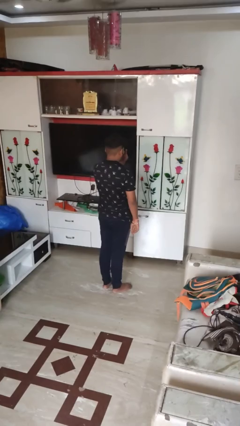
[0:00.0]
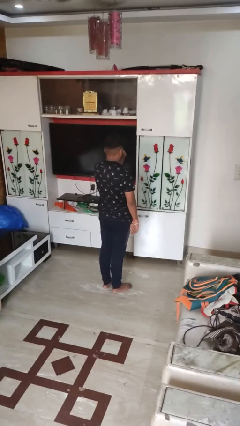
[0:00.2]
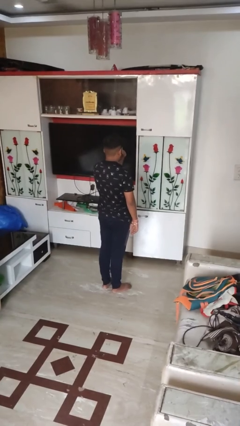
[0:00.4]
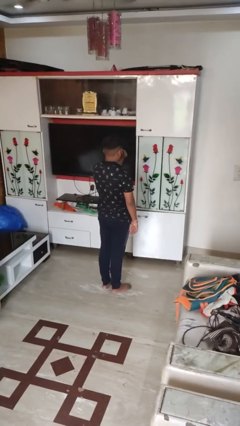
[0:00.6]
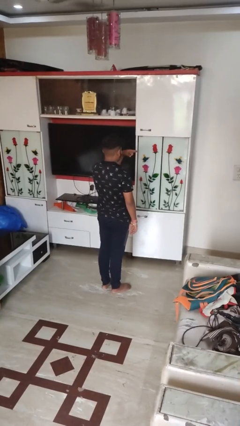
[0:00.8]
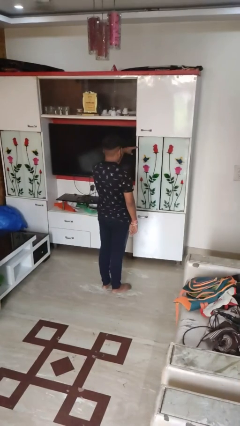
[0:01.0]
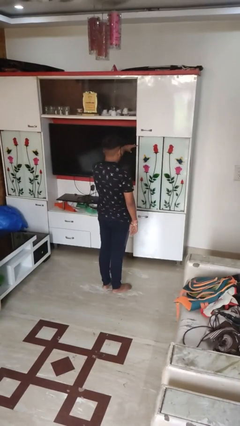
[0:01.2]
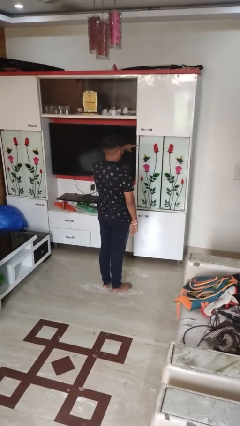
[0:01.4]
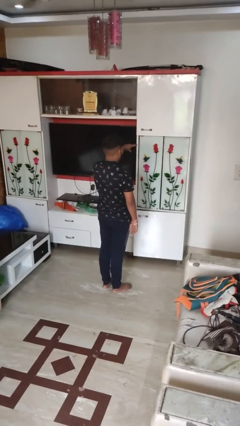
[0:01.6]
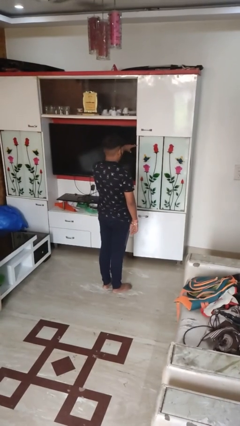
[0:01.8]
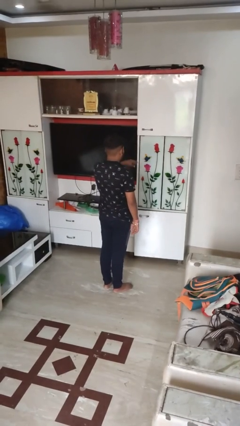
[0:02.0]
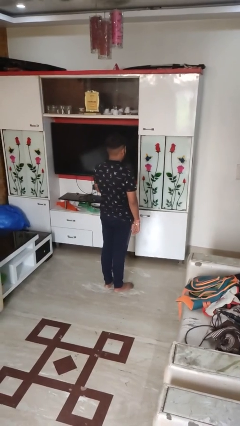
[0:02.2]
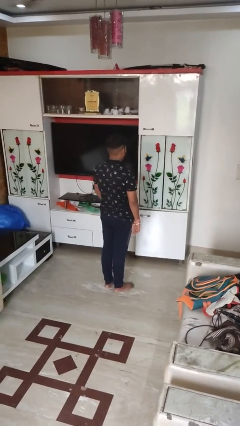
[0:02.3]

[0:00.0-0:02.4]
person gestures watch closely

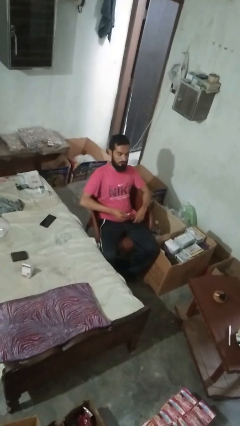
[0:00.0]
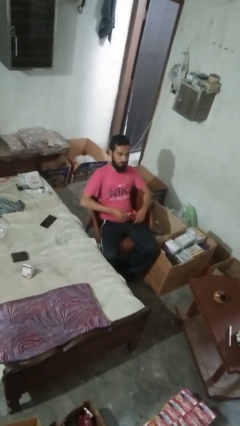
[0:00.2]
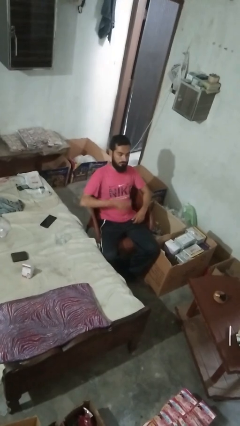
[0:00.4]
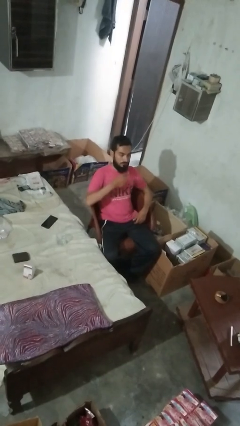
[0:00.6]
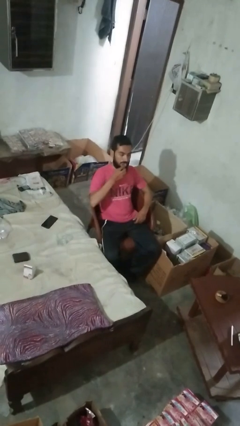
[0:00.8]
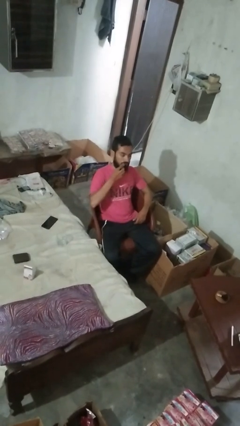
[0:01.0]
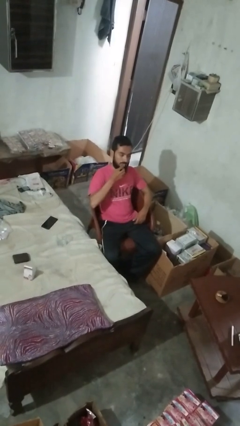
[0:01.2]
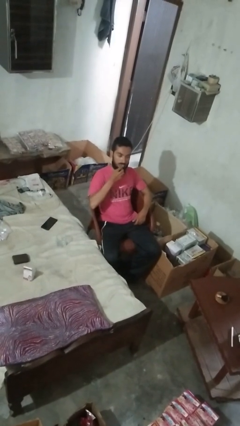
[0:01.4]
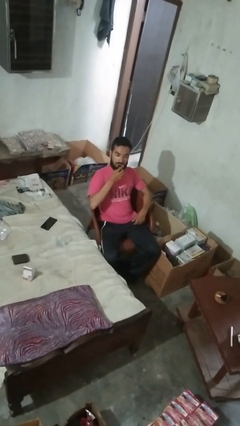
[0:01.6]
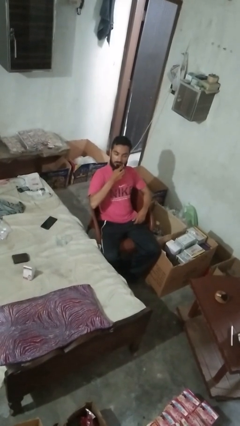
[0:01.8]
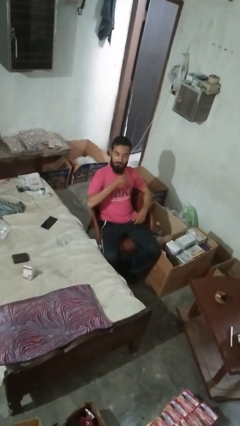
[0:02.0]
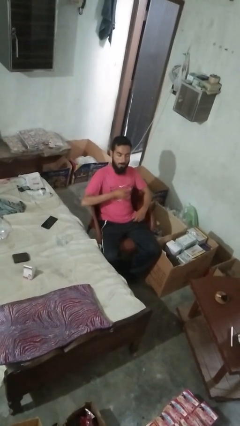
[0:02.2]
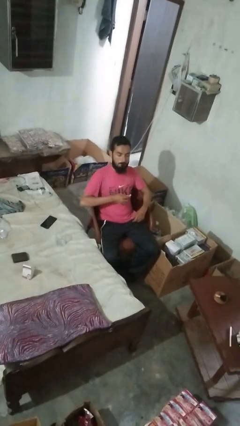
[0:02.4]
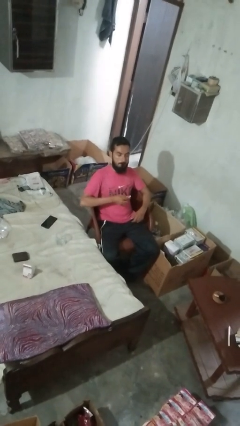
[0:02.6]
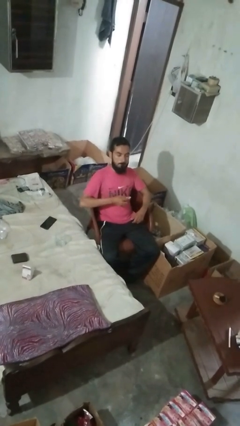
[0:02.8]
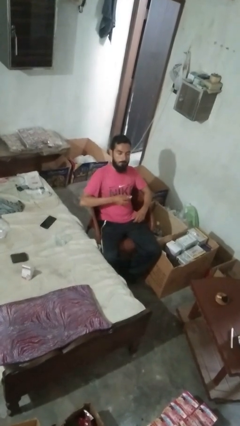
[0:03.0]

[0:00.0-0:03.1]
person applies lip makeup

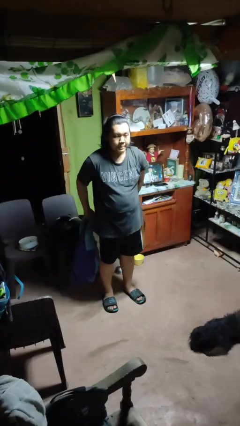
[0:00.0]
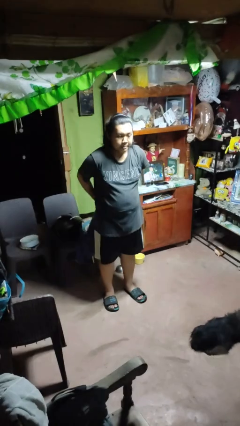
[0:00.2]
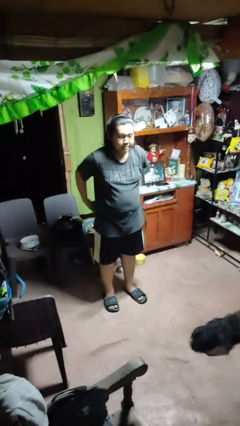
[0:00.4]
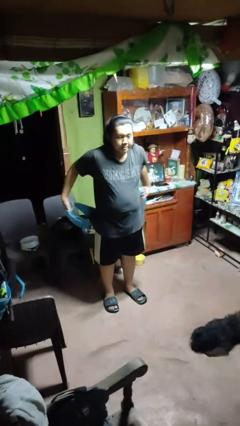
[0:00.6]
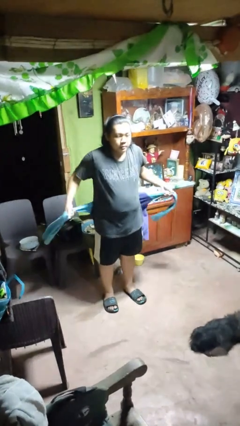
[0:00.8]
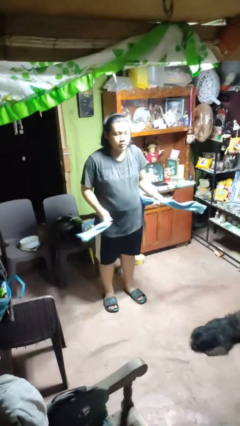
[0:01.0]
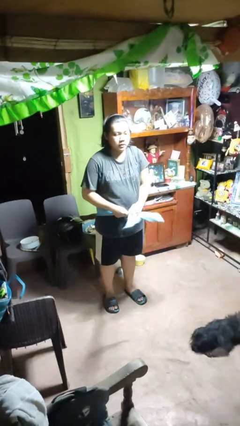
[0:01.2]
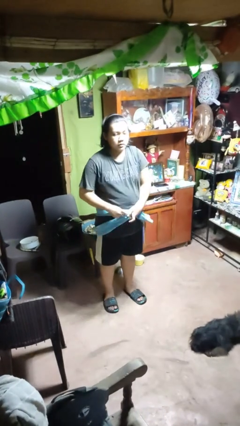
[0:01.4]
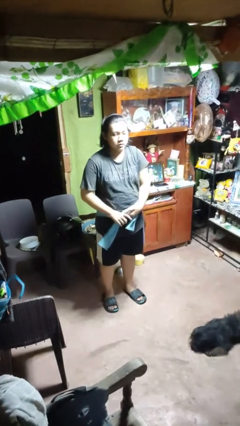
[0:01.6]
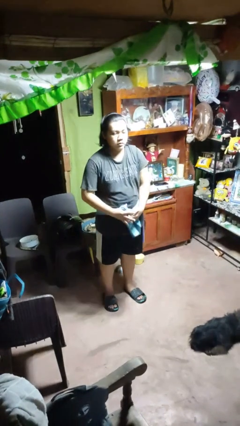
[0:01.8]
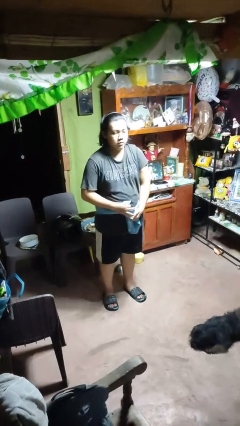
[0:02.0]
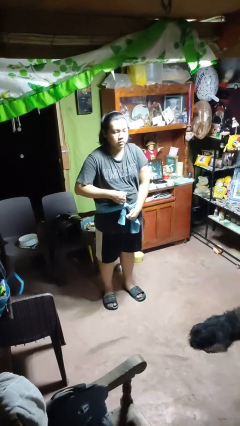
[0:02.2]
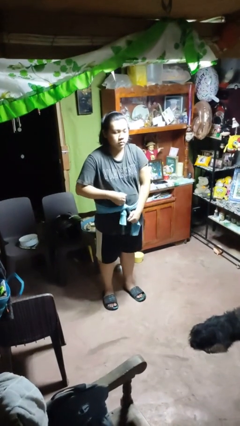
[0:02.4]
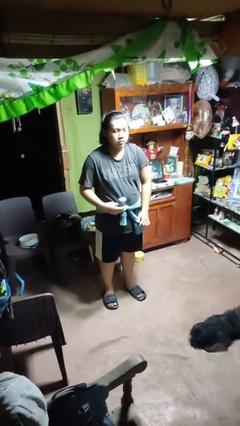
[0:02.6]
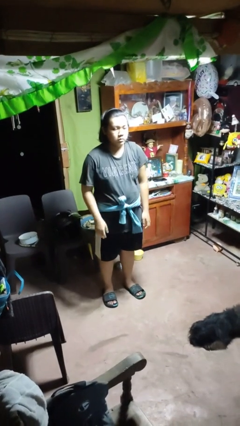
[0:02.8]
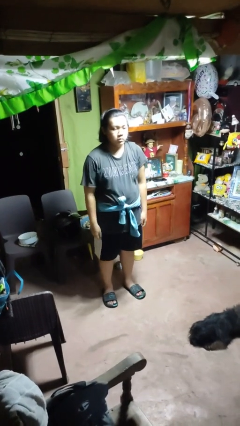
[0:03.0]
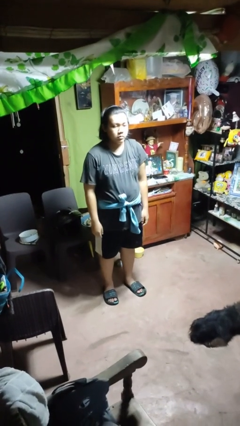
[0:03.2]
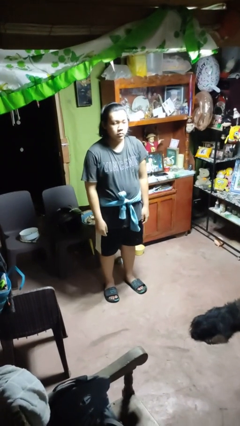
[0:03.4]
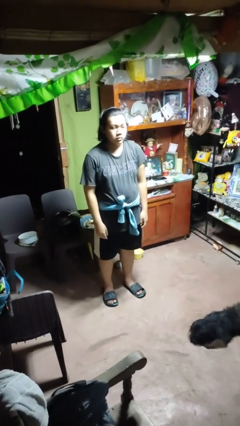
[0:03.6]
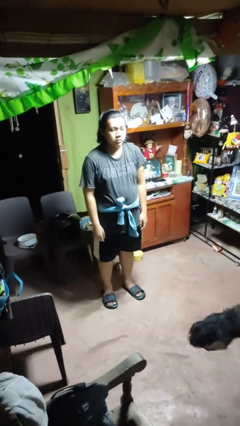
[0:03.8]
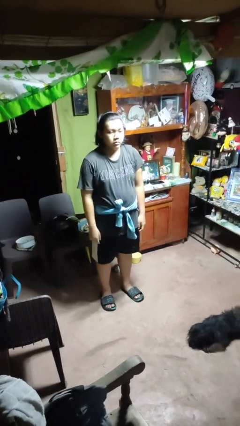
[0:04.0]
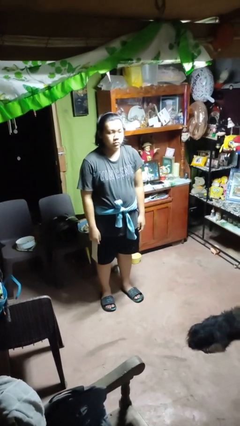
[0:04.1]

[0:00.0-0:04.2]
person ties jacket around waist

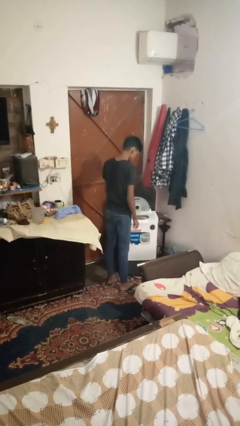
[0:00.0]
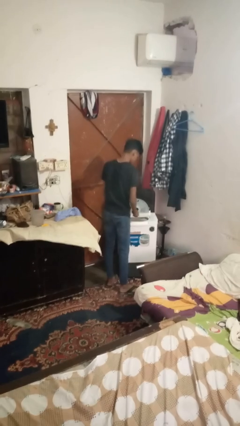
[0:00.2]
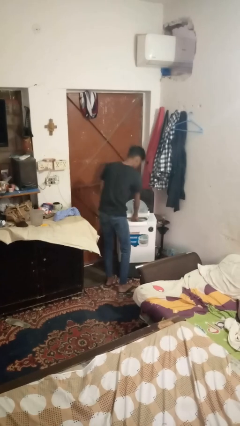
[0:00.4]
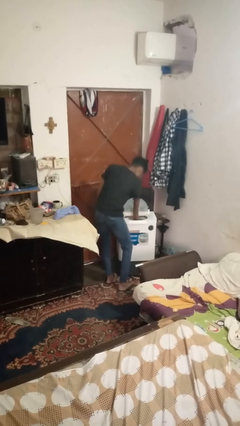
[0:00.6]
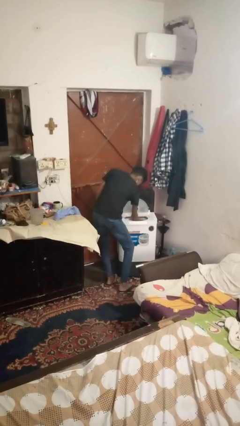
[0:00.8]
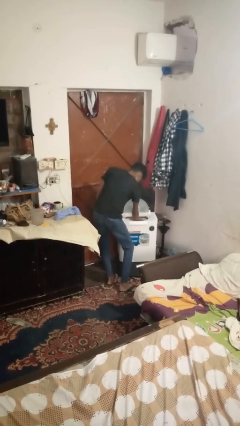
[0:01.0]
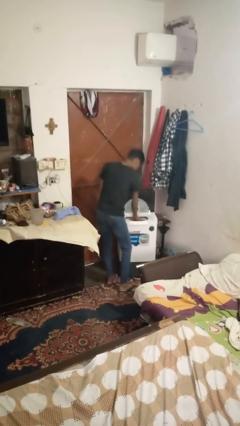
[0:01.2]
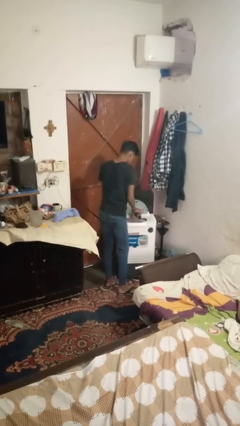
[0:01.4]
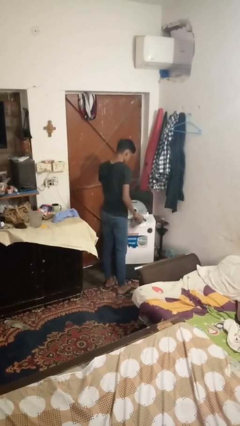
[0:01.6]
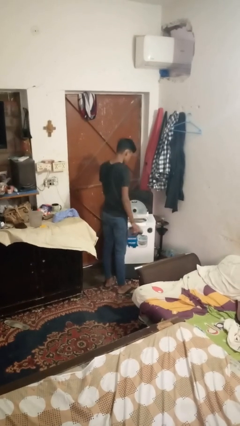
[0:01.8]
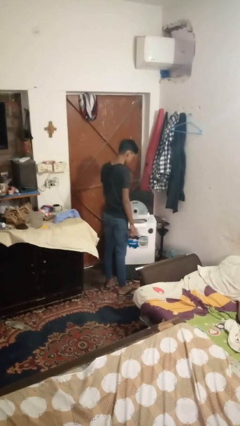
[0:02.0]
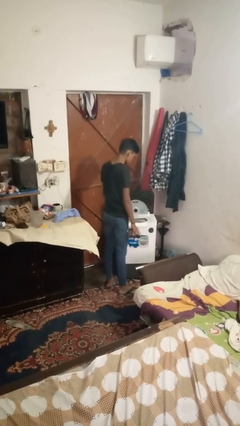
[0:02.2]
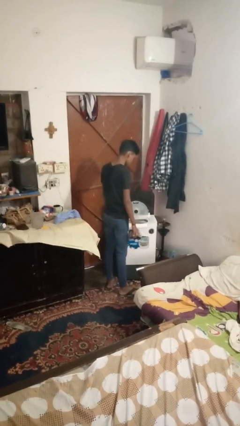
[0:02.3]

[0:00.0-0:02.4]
person unloads clotheswasher

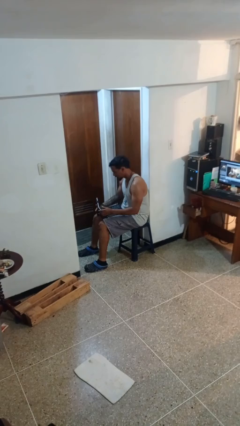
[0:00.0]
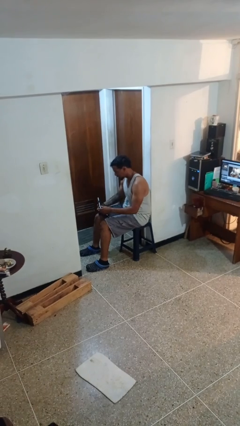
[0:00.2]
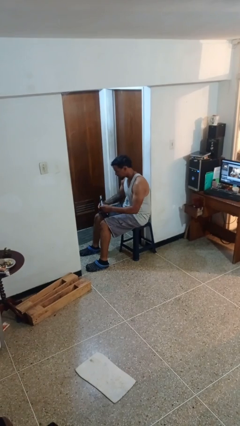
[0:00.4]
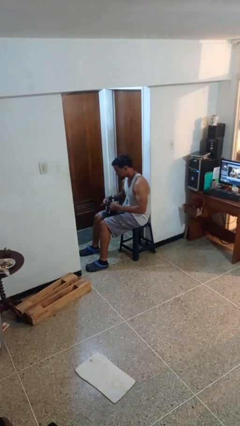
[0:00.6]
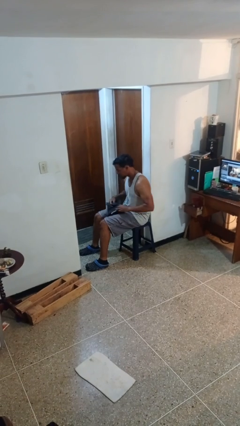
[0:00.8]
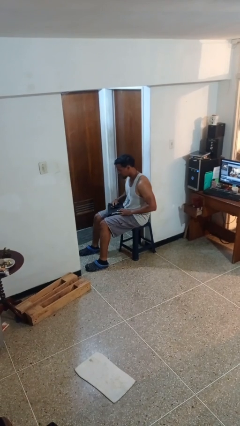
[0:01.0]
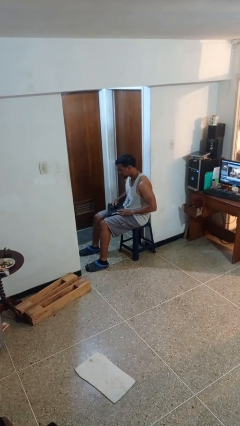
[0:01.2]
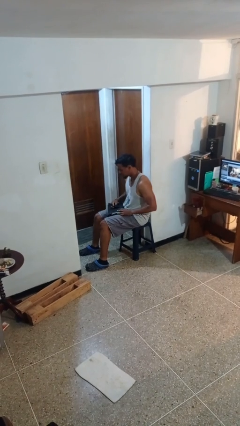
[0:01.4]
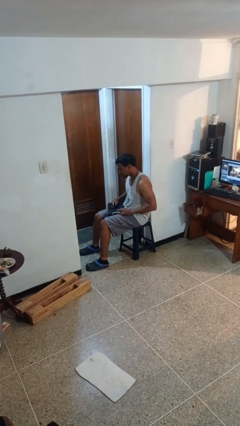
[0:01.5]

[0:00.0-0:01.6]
person closes laptop

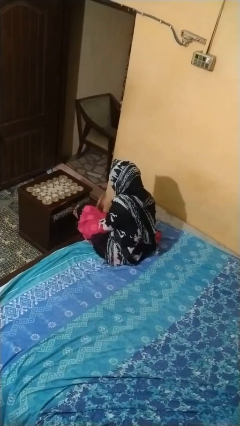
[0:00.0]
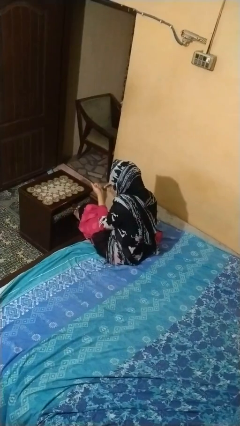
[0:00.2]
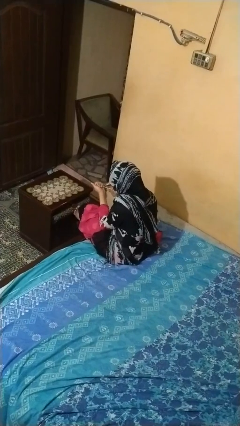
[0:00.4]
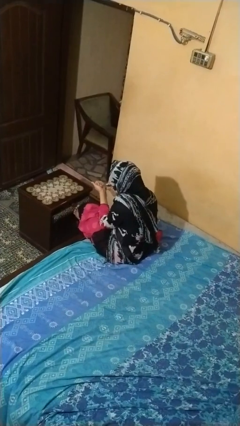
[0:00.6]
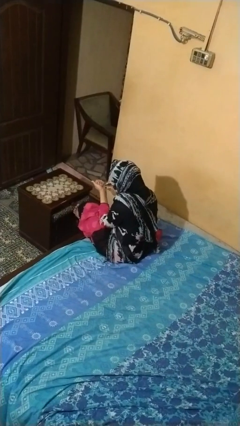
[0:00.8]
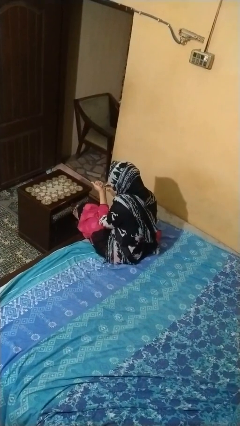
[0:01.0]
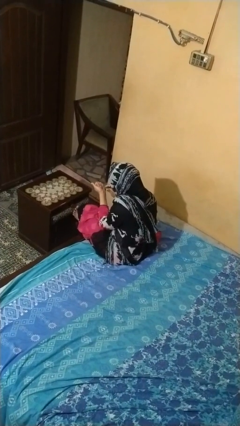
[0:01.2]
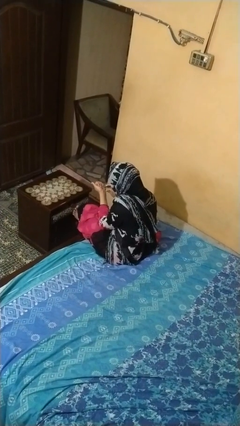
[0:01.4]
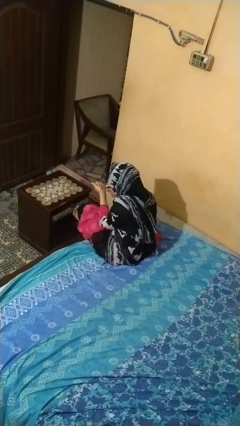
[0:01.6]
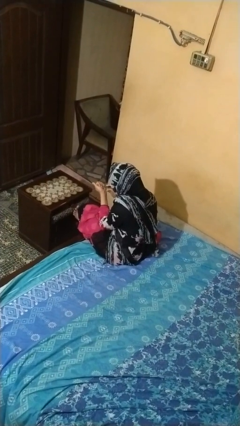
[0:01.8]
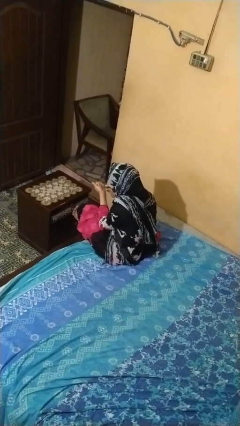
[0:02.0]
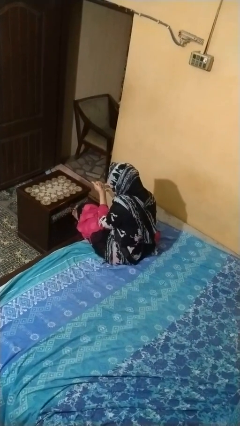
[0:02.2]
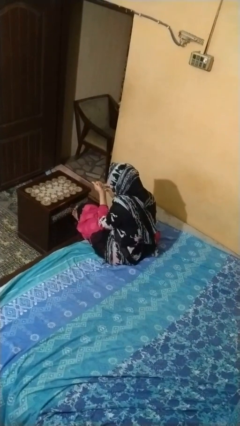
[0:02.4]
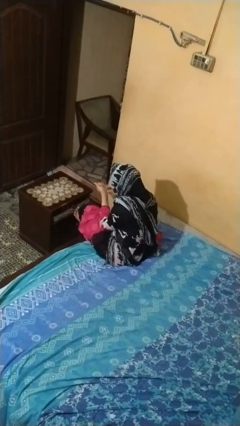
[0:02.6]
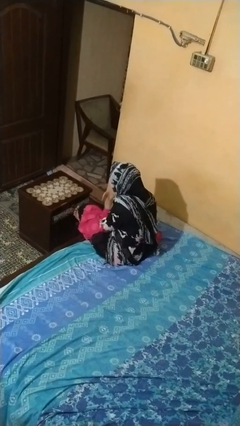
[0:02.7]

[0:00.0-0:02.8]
person clips fingernails

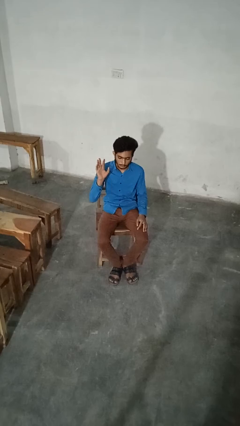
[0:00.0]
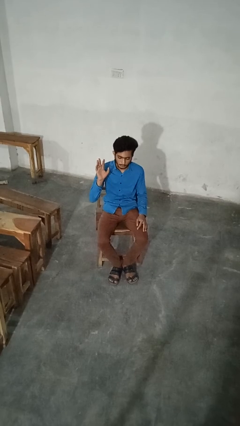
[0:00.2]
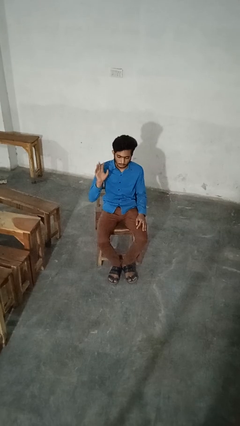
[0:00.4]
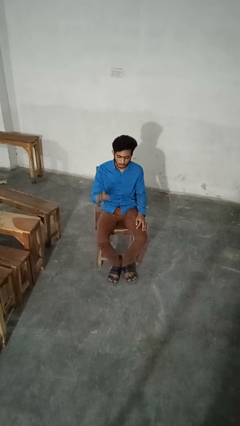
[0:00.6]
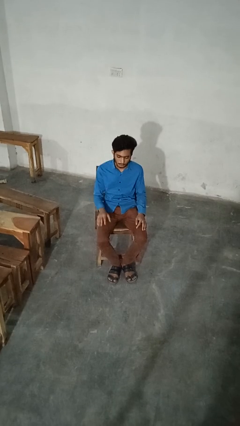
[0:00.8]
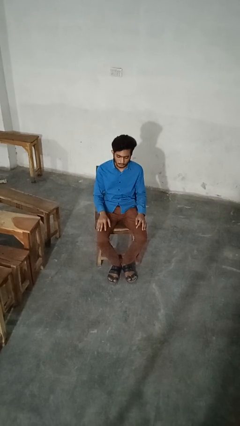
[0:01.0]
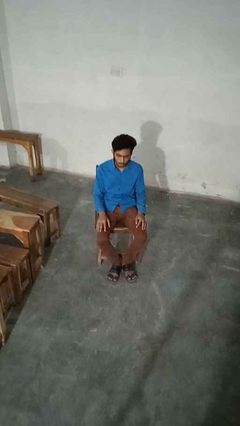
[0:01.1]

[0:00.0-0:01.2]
person gestures lower hand
